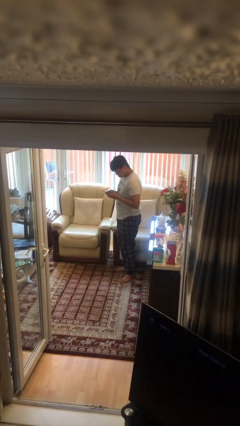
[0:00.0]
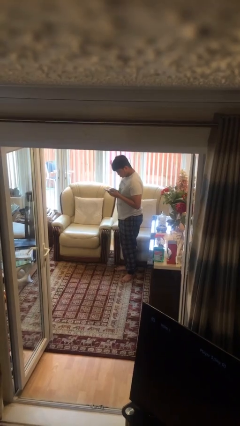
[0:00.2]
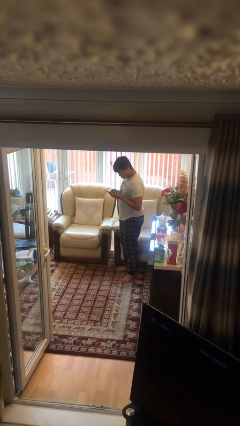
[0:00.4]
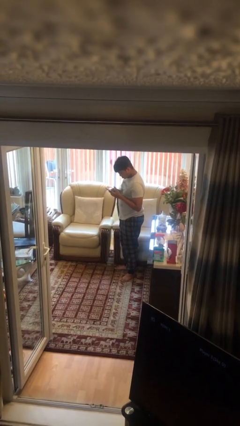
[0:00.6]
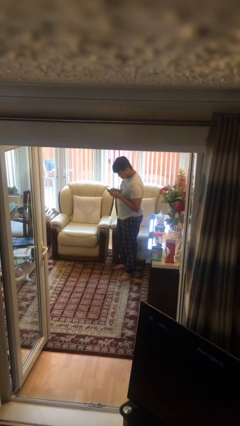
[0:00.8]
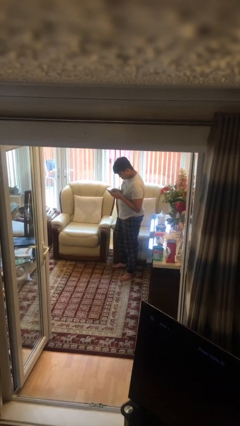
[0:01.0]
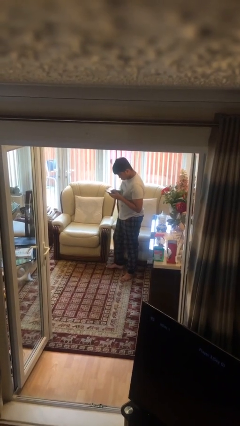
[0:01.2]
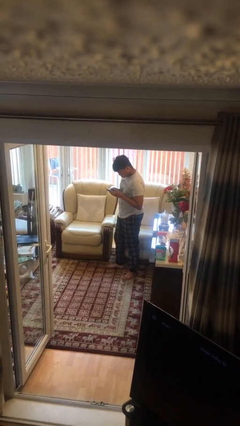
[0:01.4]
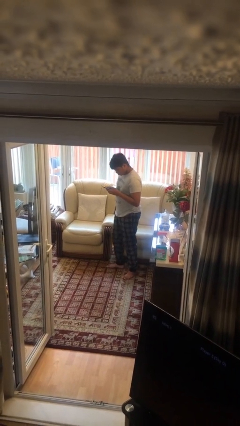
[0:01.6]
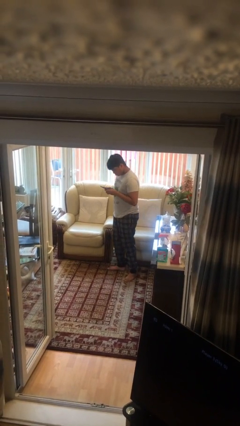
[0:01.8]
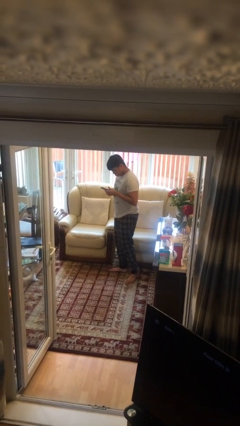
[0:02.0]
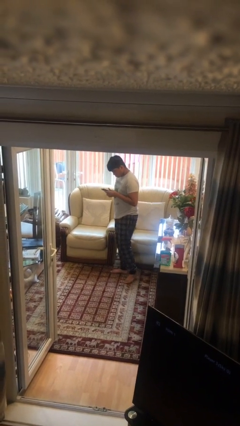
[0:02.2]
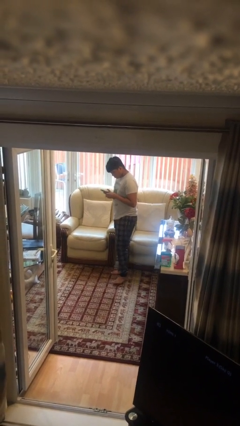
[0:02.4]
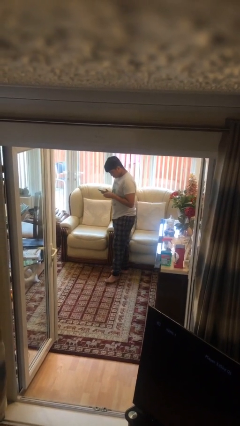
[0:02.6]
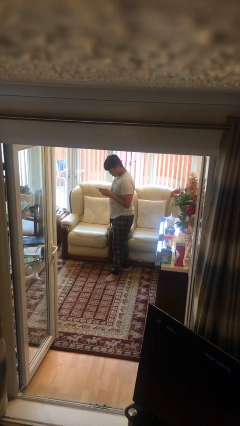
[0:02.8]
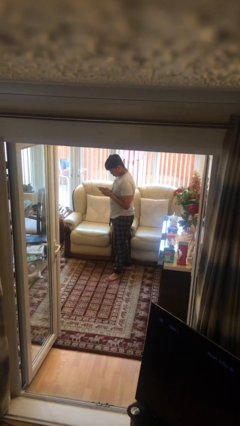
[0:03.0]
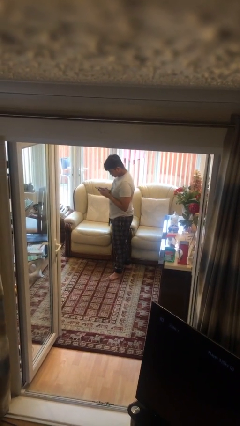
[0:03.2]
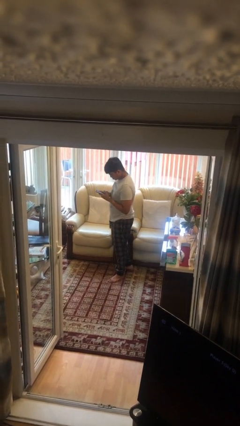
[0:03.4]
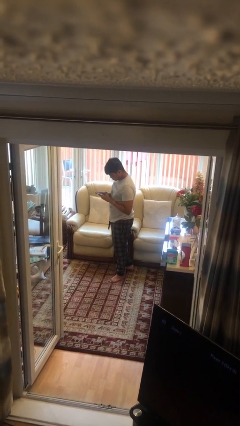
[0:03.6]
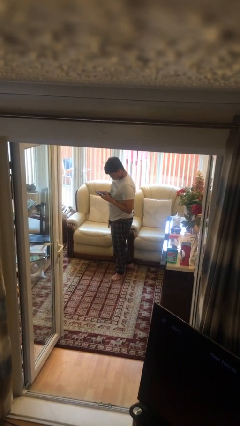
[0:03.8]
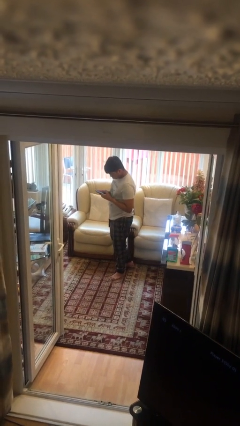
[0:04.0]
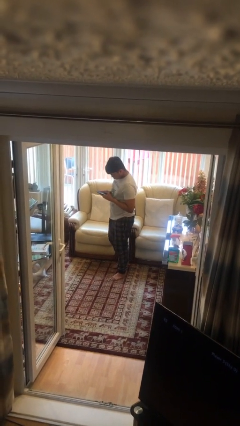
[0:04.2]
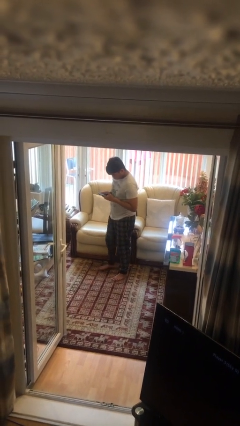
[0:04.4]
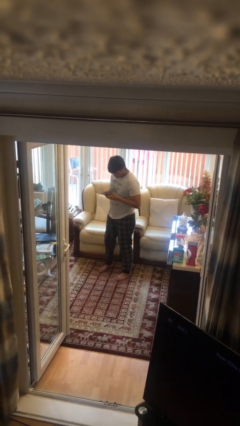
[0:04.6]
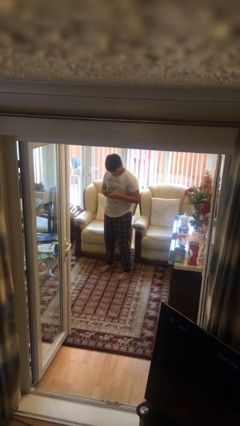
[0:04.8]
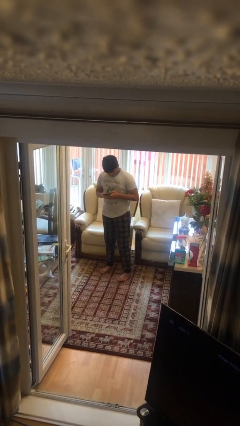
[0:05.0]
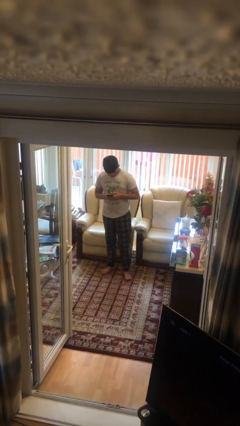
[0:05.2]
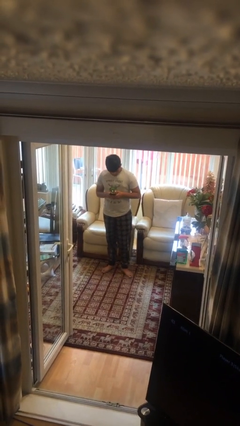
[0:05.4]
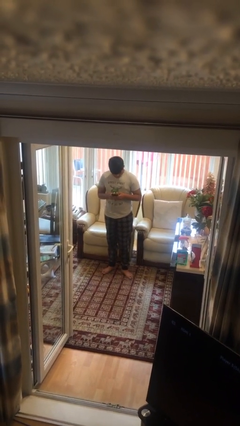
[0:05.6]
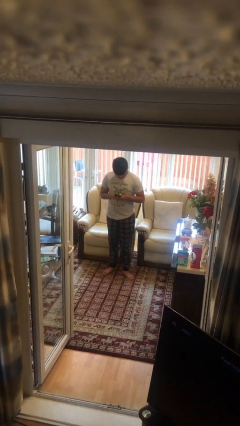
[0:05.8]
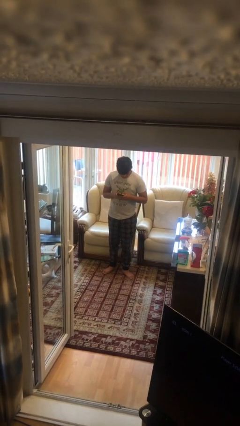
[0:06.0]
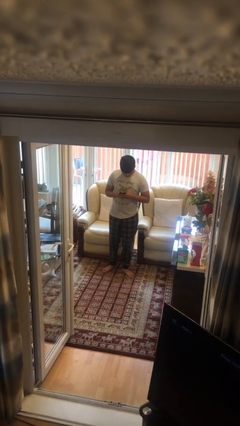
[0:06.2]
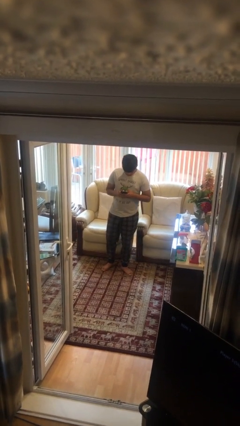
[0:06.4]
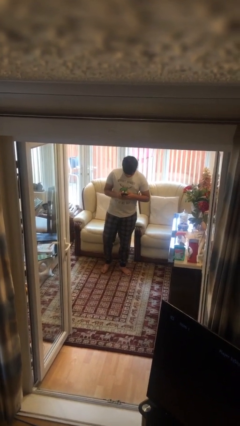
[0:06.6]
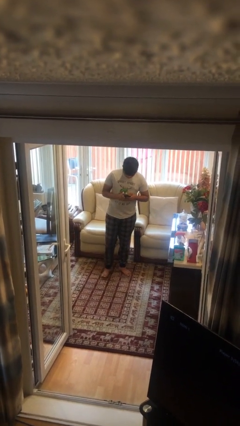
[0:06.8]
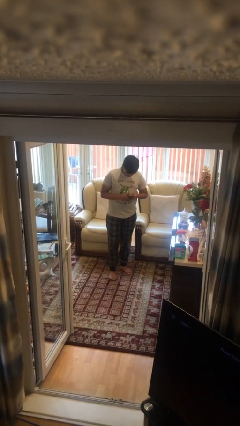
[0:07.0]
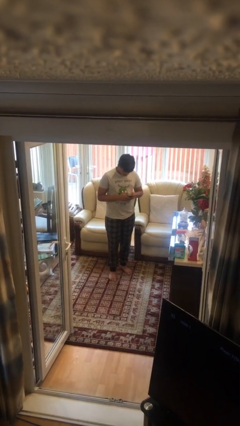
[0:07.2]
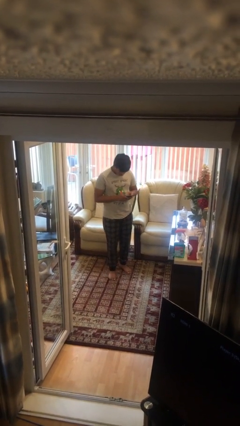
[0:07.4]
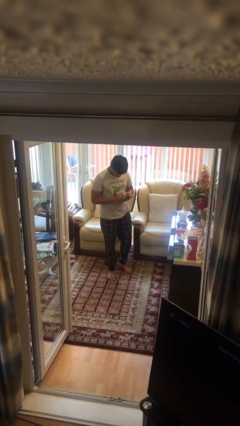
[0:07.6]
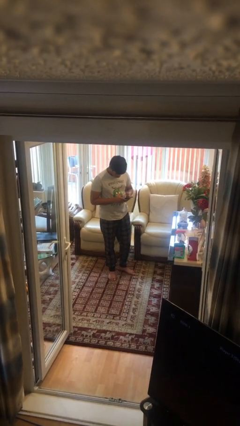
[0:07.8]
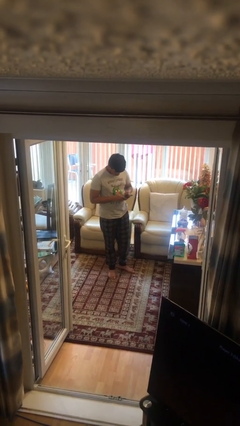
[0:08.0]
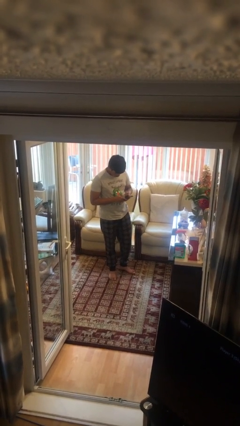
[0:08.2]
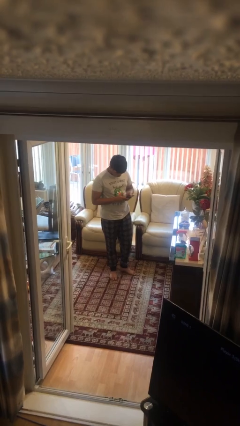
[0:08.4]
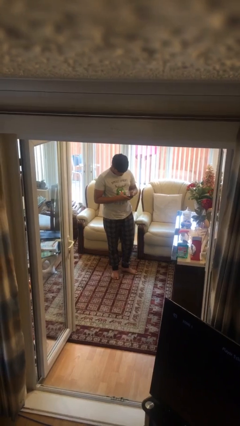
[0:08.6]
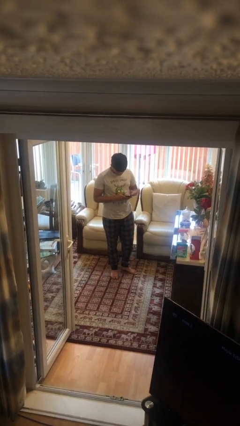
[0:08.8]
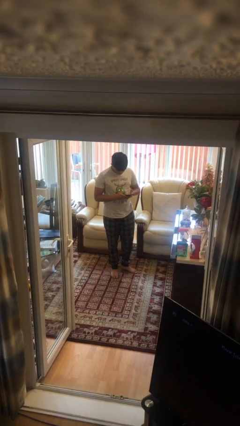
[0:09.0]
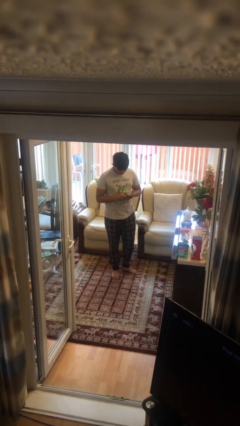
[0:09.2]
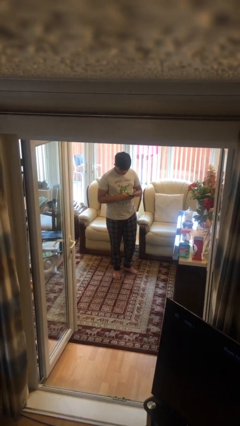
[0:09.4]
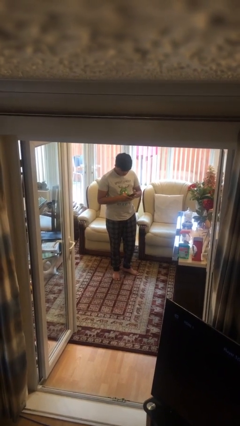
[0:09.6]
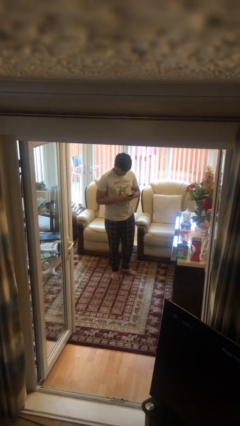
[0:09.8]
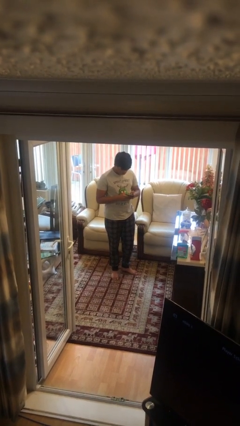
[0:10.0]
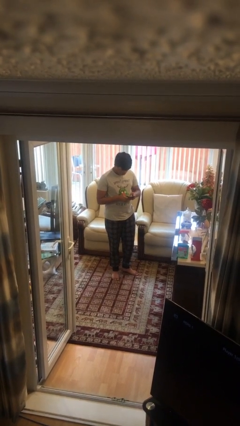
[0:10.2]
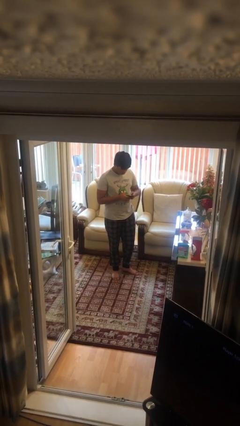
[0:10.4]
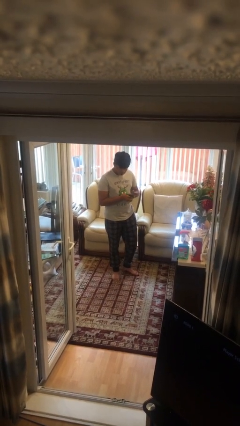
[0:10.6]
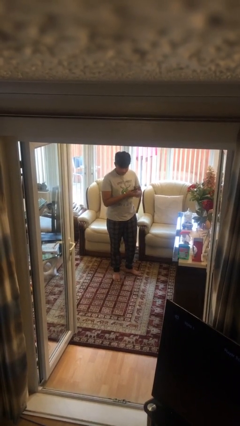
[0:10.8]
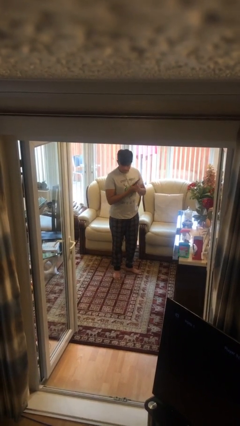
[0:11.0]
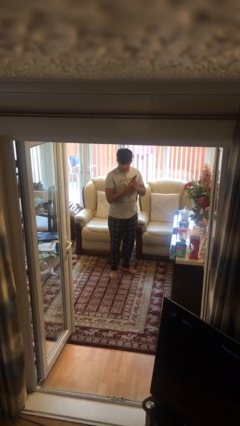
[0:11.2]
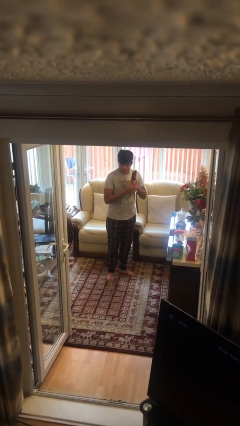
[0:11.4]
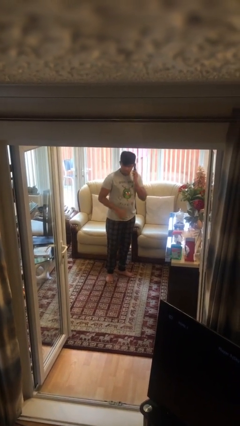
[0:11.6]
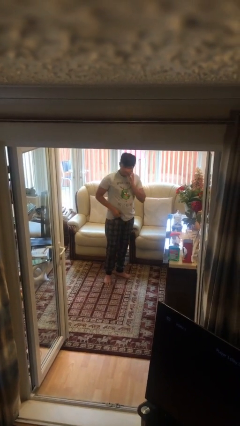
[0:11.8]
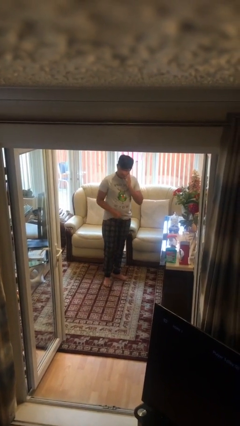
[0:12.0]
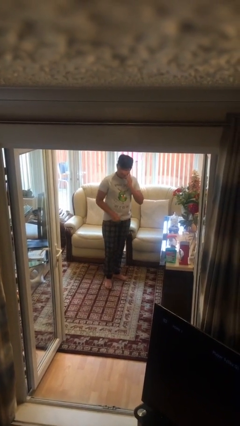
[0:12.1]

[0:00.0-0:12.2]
person texts on phone

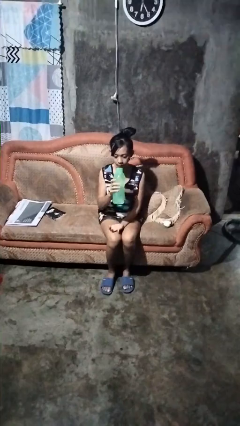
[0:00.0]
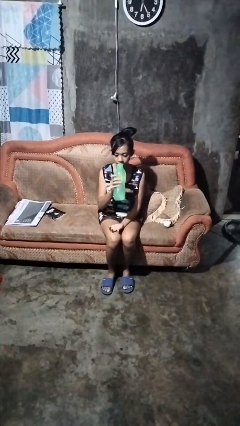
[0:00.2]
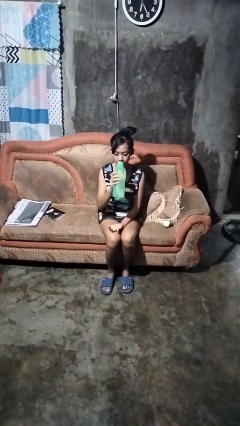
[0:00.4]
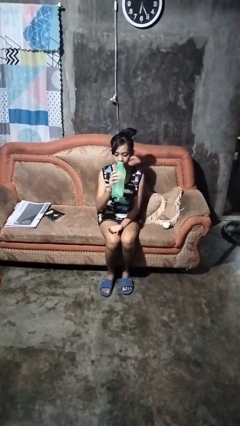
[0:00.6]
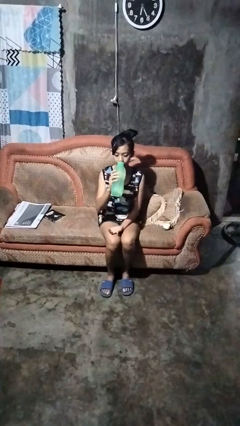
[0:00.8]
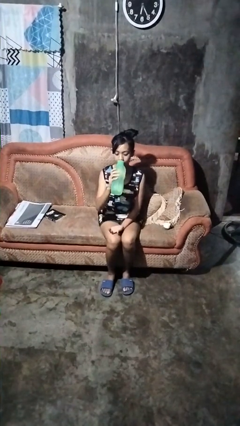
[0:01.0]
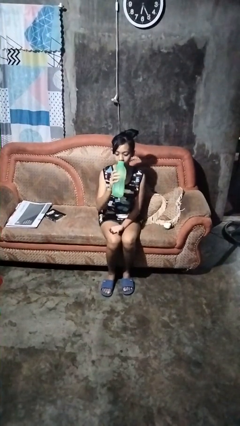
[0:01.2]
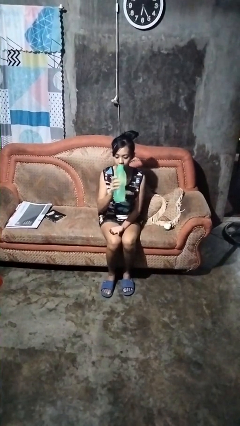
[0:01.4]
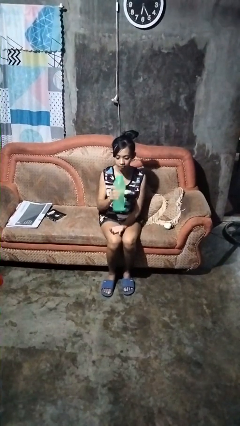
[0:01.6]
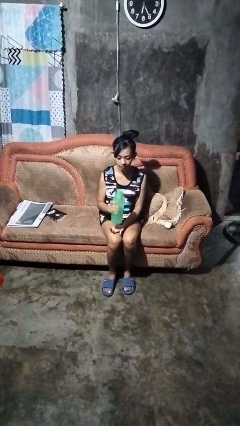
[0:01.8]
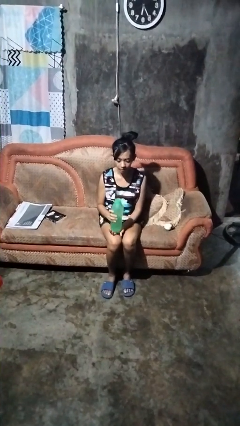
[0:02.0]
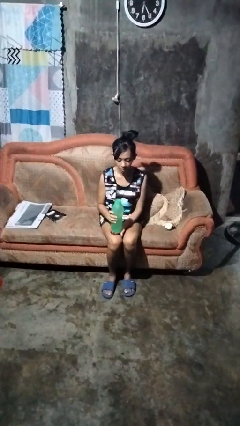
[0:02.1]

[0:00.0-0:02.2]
person drinks from bottle

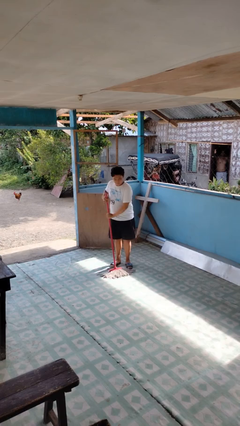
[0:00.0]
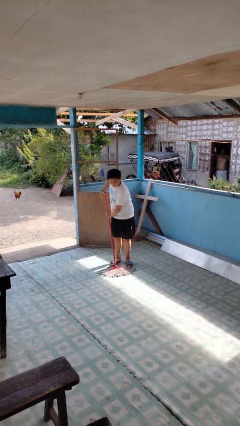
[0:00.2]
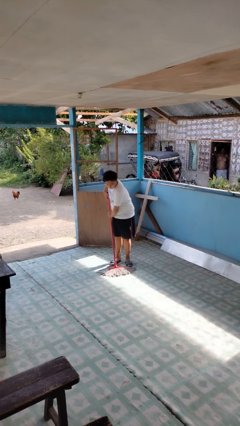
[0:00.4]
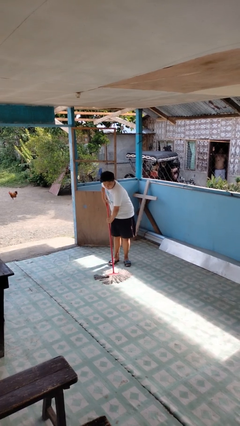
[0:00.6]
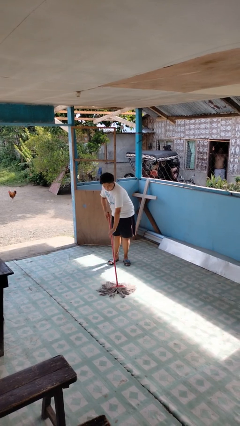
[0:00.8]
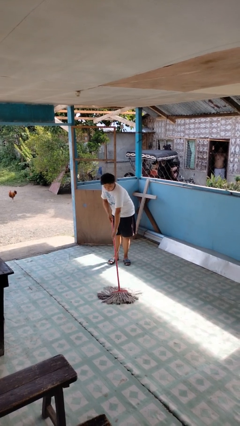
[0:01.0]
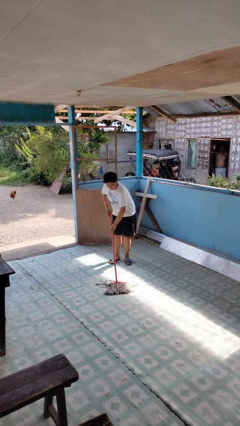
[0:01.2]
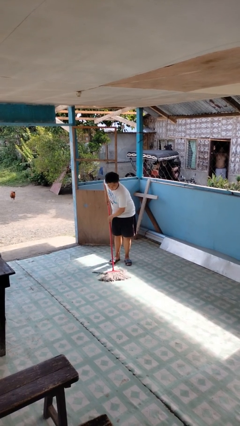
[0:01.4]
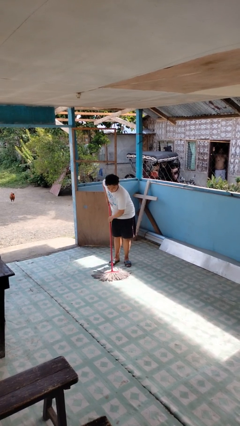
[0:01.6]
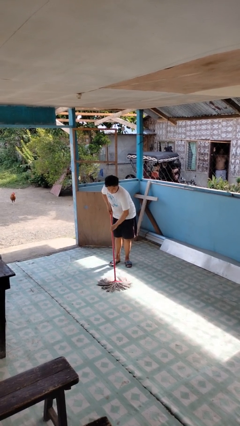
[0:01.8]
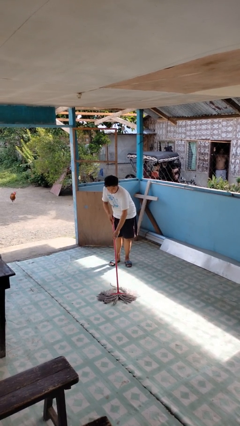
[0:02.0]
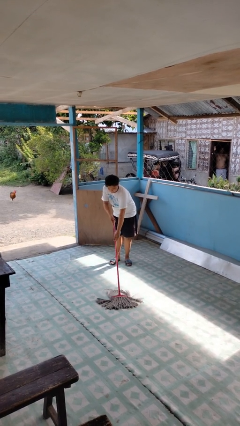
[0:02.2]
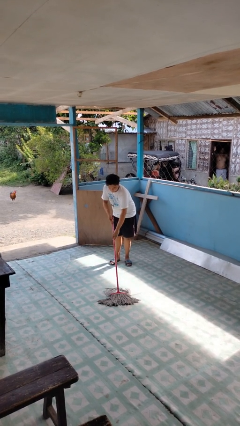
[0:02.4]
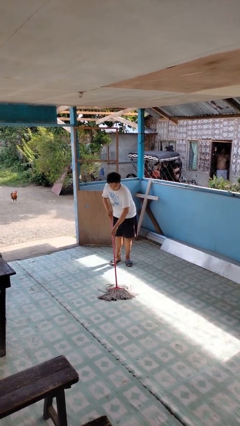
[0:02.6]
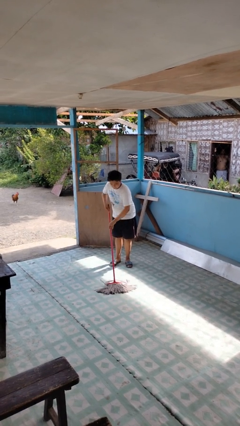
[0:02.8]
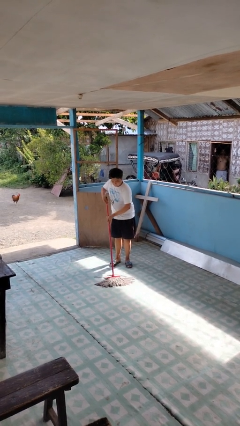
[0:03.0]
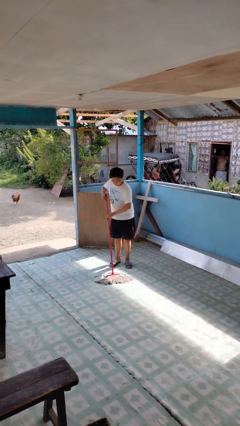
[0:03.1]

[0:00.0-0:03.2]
person mops

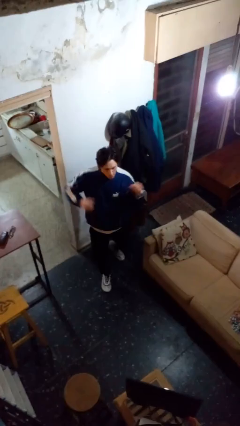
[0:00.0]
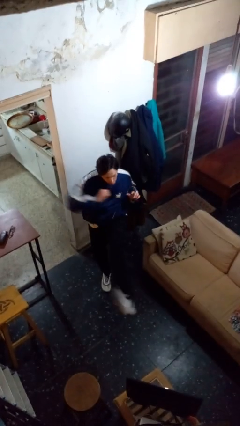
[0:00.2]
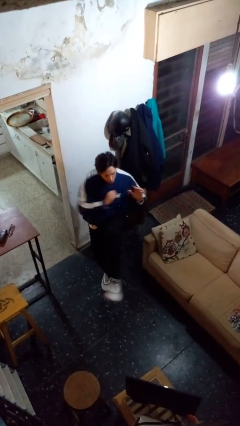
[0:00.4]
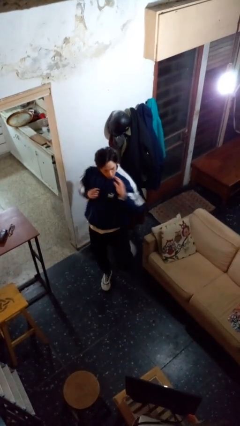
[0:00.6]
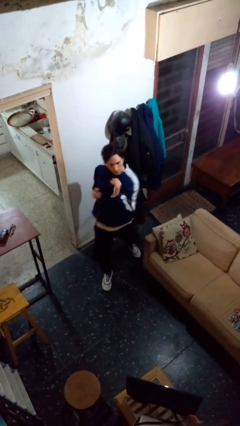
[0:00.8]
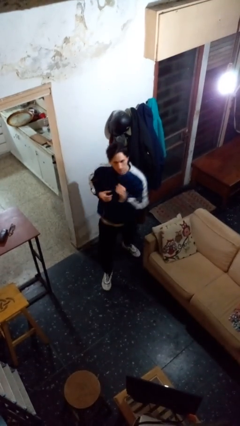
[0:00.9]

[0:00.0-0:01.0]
person karate kicks
